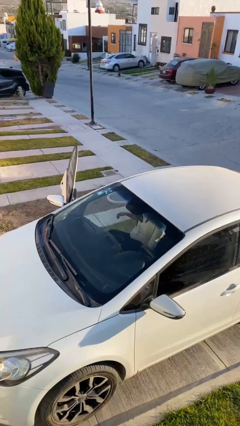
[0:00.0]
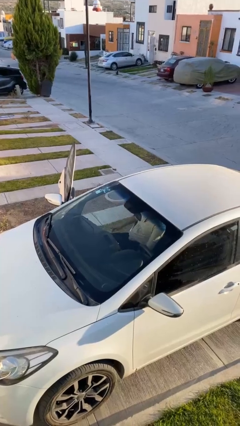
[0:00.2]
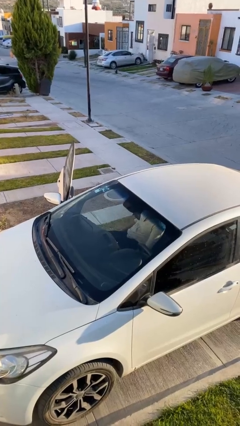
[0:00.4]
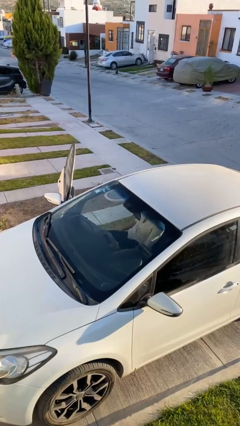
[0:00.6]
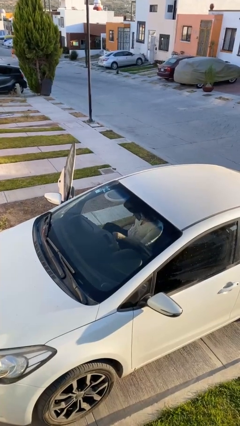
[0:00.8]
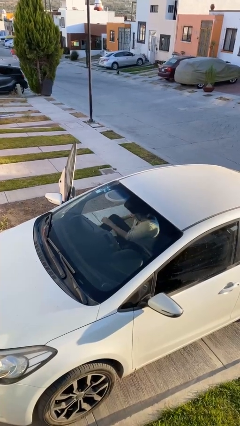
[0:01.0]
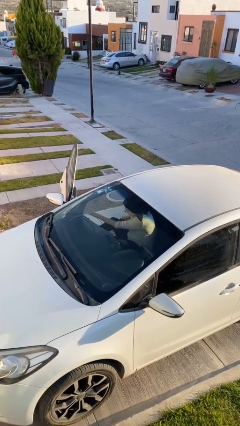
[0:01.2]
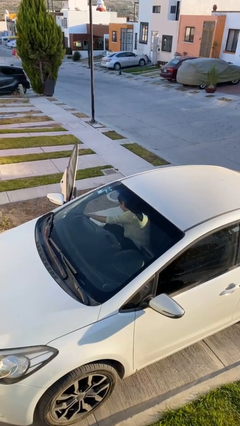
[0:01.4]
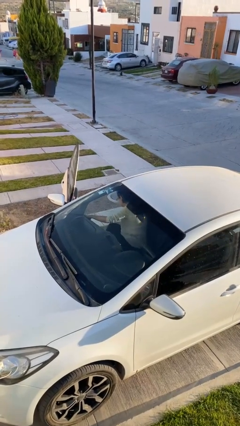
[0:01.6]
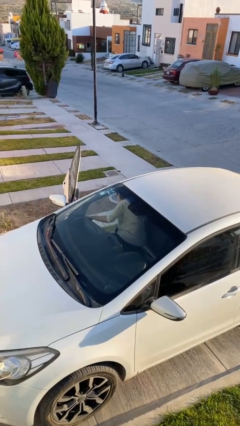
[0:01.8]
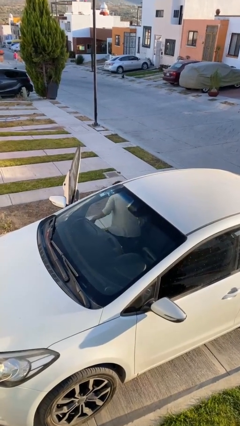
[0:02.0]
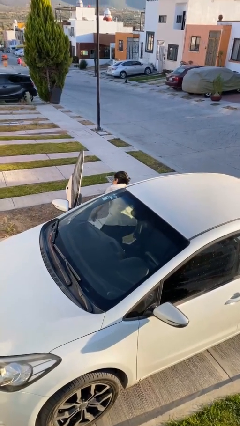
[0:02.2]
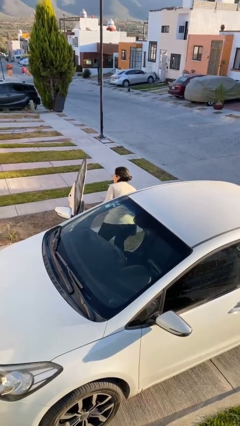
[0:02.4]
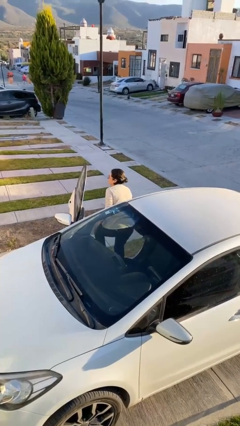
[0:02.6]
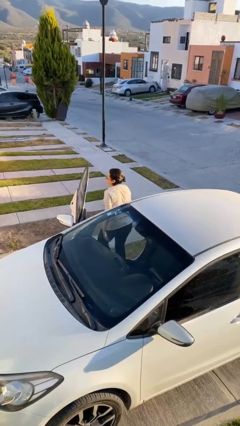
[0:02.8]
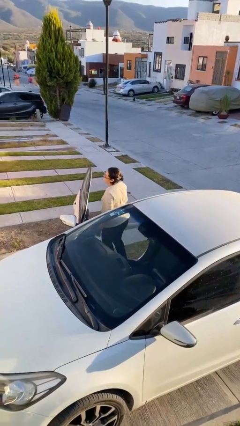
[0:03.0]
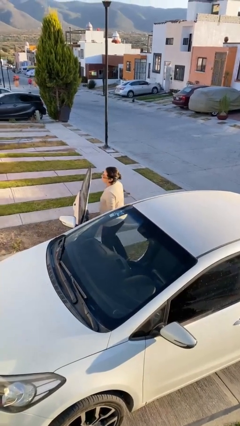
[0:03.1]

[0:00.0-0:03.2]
person exits car

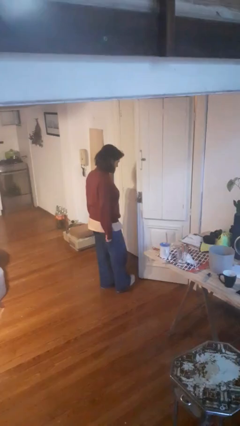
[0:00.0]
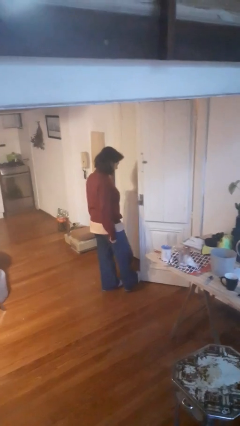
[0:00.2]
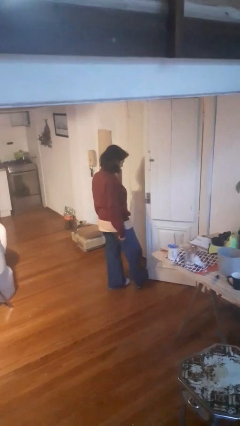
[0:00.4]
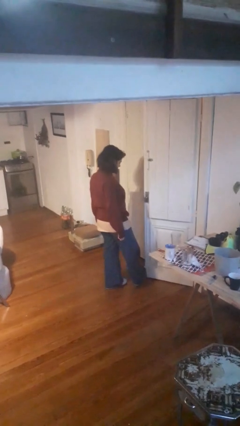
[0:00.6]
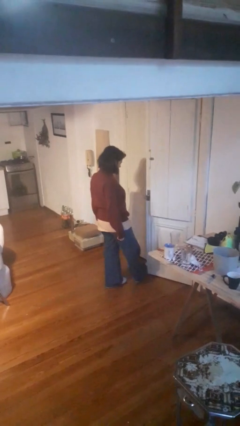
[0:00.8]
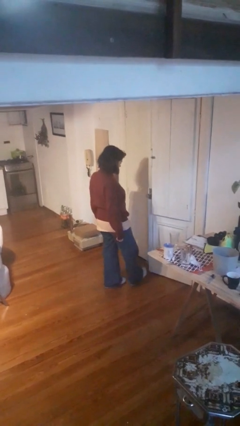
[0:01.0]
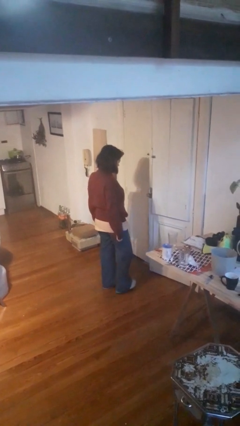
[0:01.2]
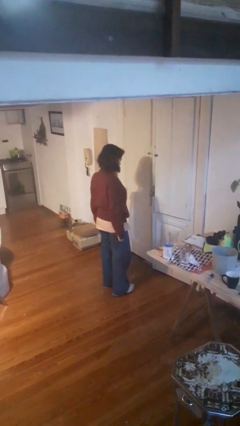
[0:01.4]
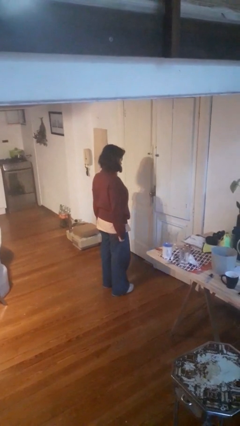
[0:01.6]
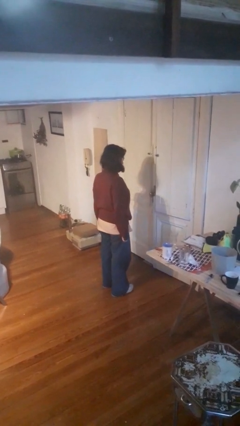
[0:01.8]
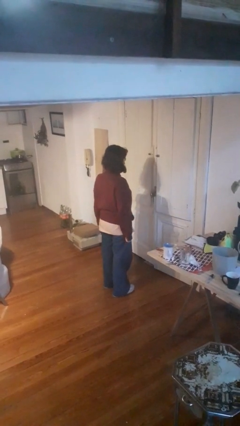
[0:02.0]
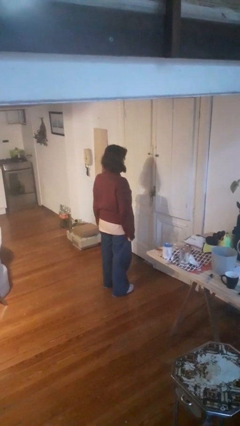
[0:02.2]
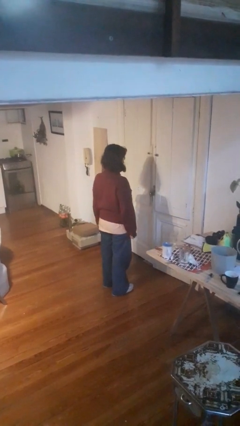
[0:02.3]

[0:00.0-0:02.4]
person closes door with foot

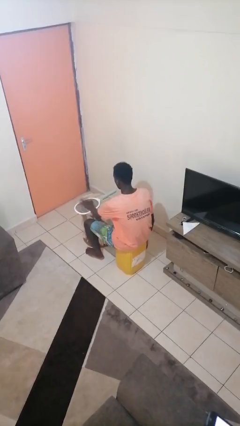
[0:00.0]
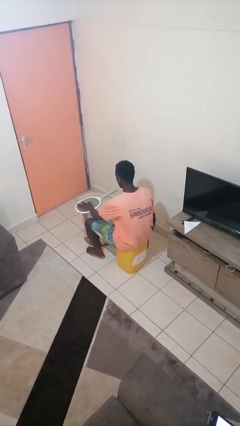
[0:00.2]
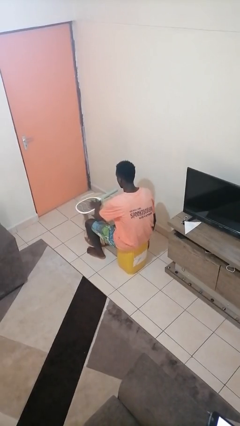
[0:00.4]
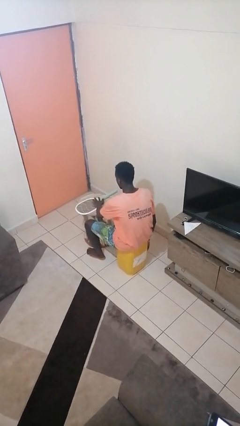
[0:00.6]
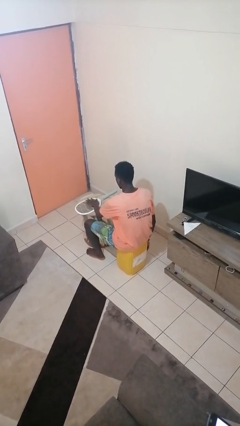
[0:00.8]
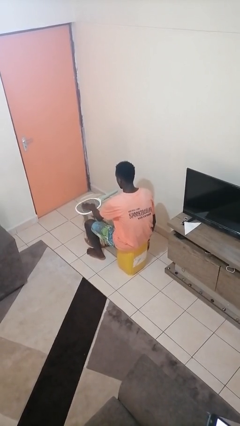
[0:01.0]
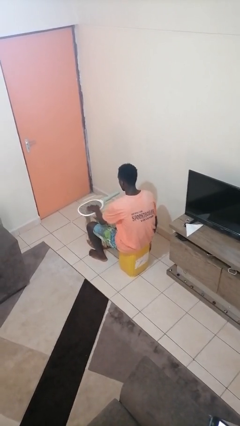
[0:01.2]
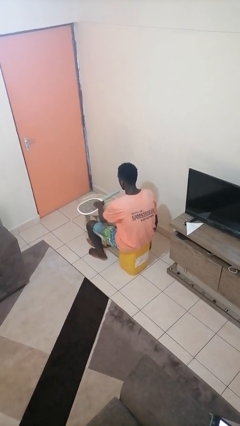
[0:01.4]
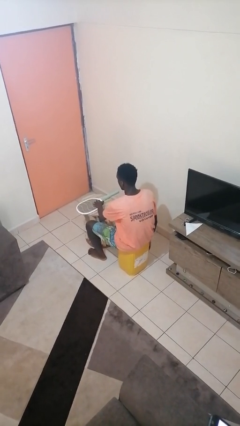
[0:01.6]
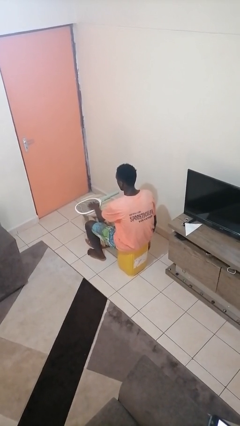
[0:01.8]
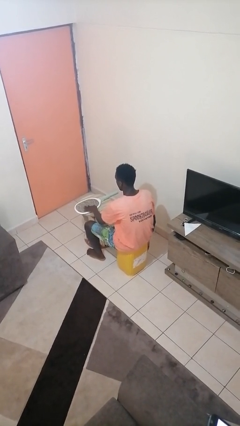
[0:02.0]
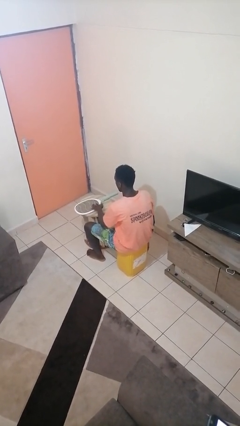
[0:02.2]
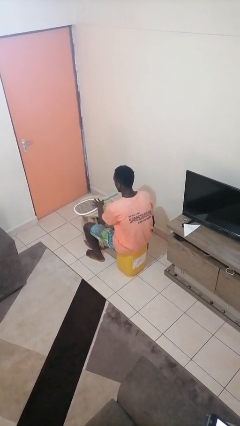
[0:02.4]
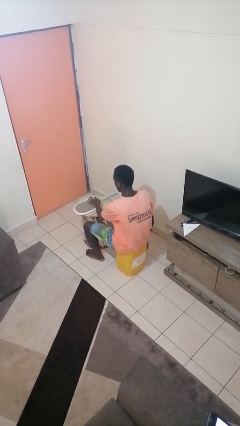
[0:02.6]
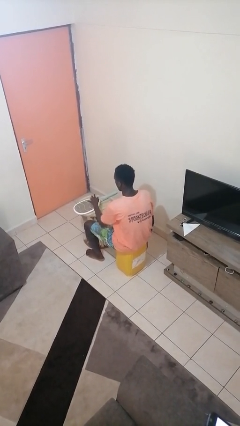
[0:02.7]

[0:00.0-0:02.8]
person waves hand over object

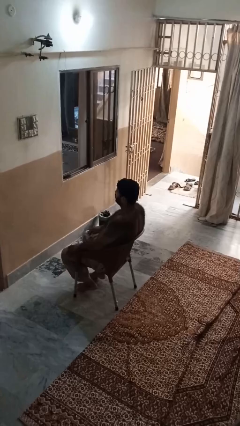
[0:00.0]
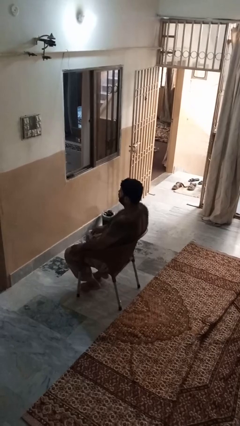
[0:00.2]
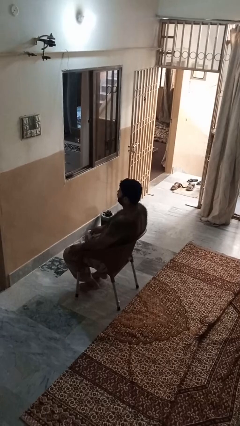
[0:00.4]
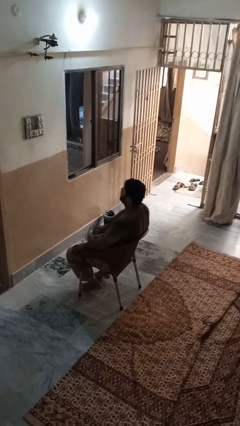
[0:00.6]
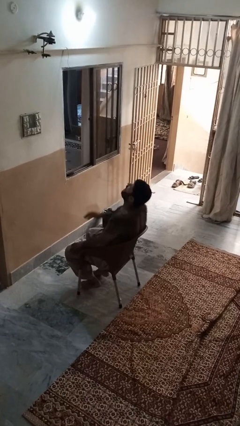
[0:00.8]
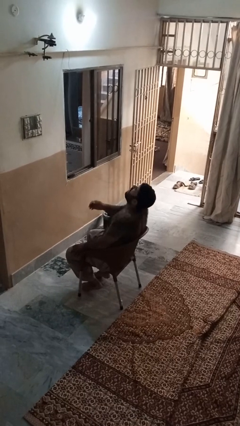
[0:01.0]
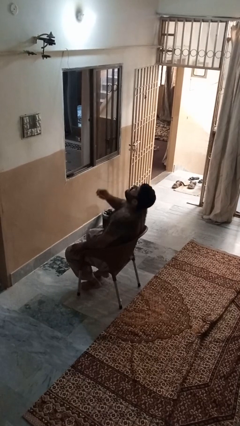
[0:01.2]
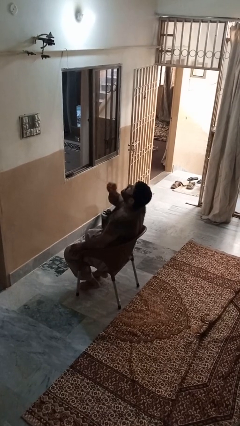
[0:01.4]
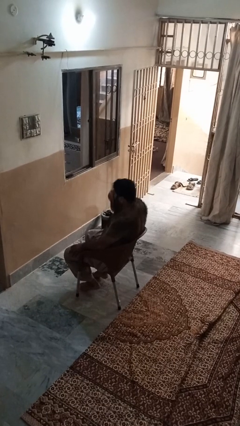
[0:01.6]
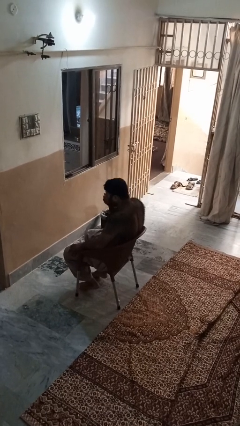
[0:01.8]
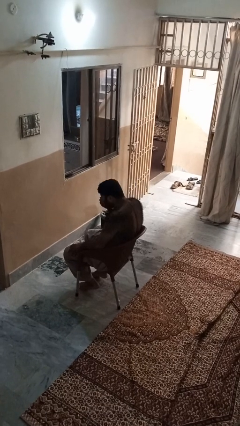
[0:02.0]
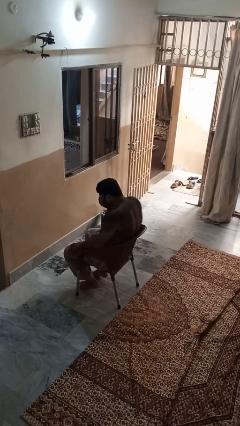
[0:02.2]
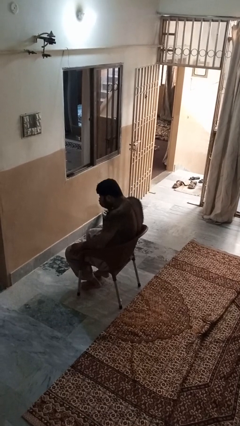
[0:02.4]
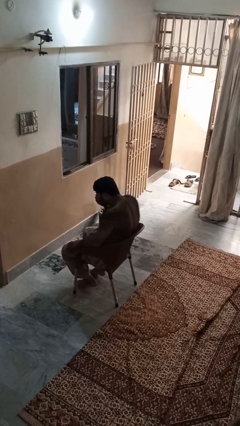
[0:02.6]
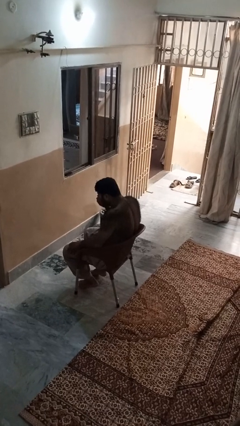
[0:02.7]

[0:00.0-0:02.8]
person sneezes into hand

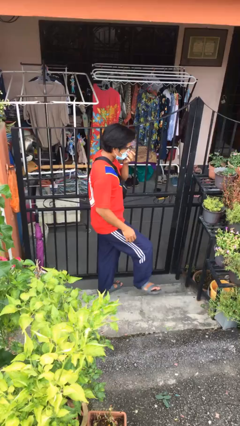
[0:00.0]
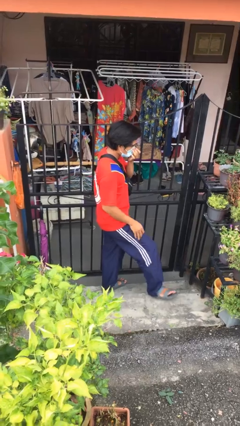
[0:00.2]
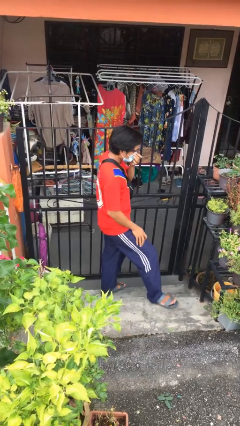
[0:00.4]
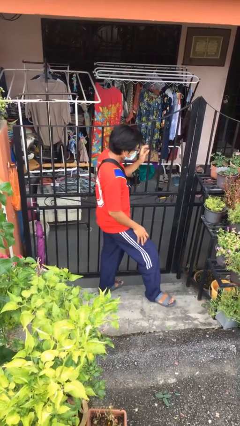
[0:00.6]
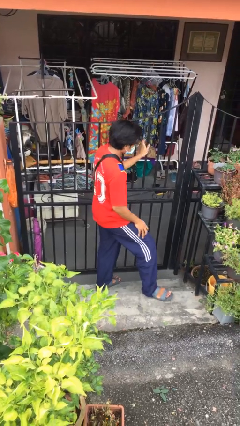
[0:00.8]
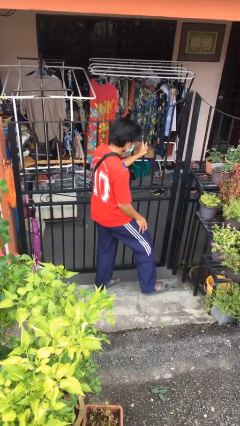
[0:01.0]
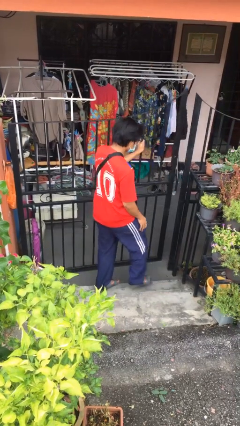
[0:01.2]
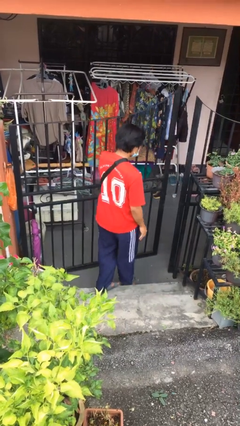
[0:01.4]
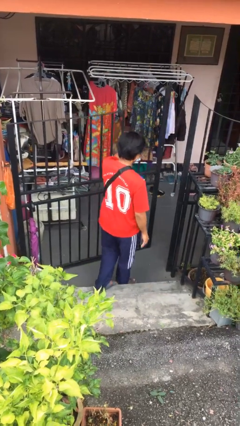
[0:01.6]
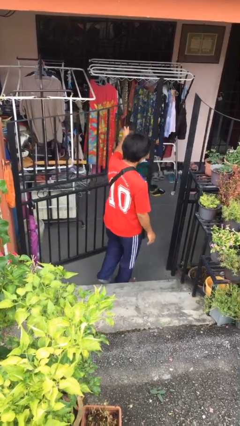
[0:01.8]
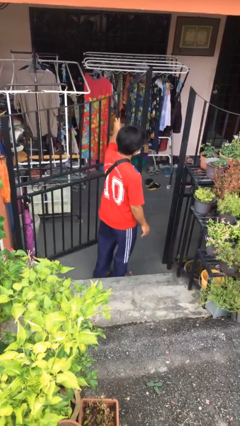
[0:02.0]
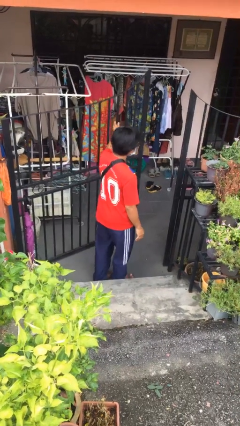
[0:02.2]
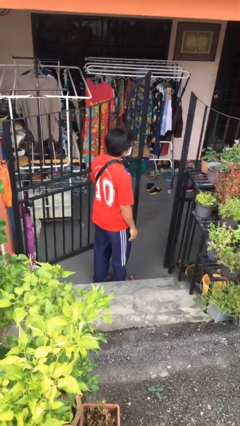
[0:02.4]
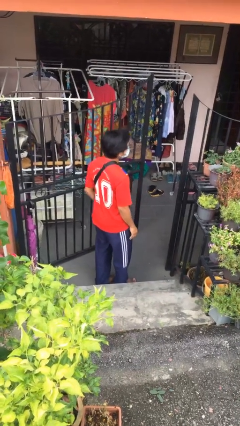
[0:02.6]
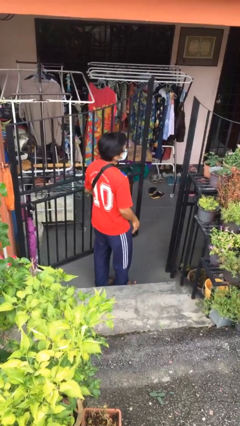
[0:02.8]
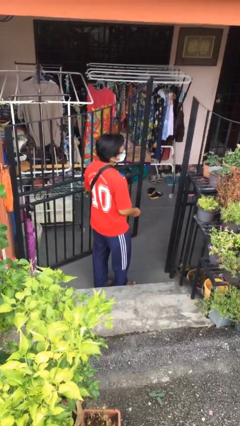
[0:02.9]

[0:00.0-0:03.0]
person opens facility door

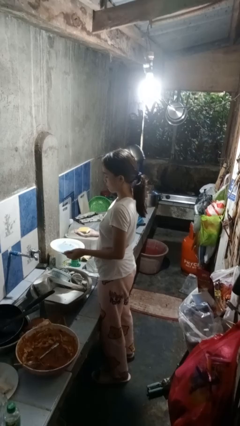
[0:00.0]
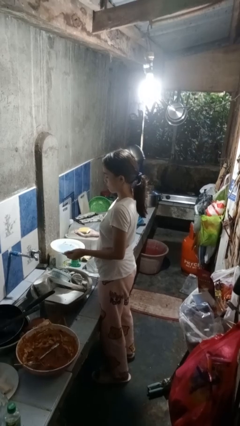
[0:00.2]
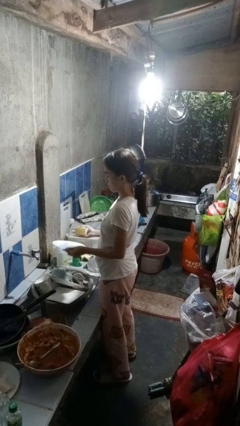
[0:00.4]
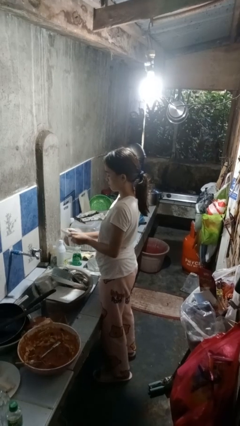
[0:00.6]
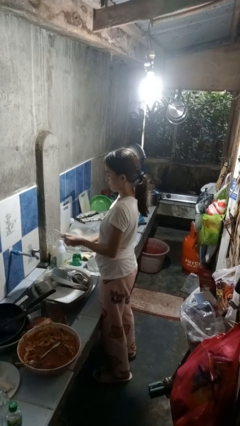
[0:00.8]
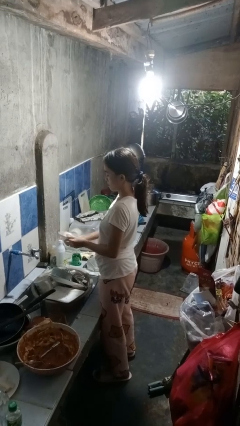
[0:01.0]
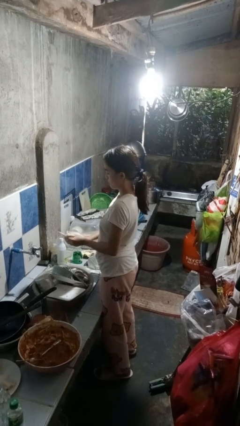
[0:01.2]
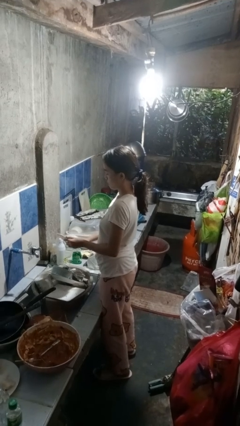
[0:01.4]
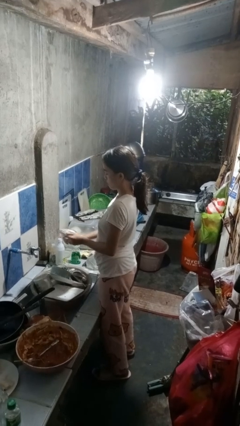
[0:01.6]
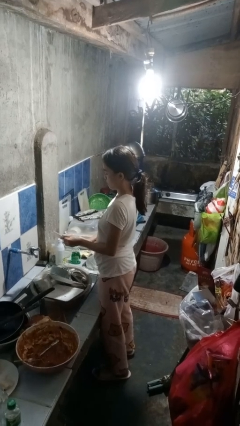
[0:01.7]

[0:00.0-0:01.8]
person washes dish

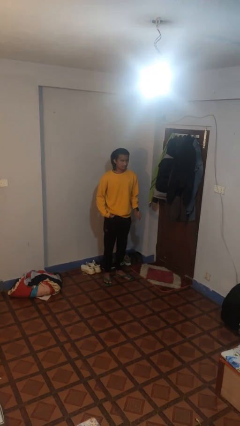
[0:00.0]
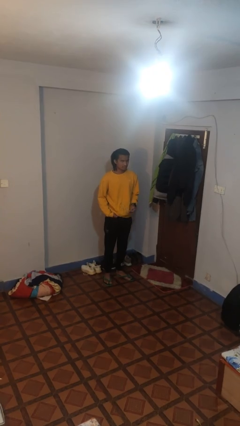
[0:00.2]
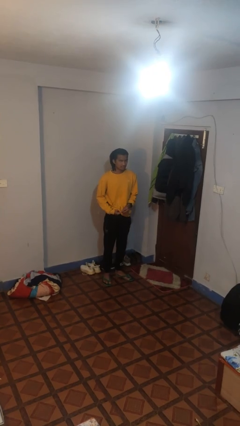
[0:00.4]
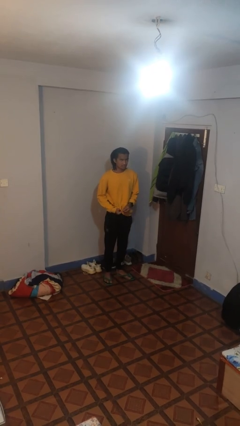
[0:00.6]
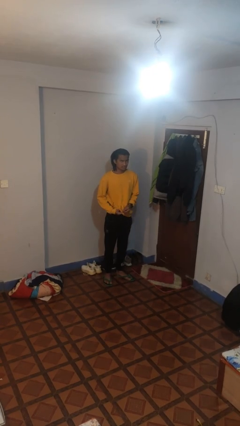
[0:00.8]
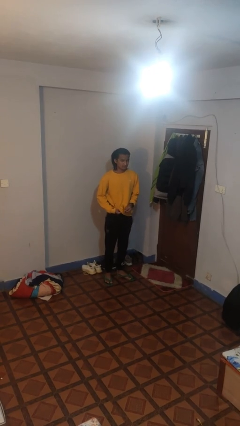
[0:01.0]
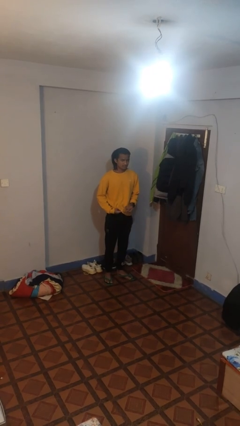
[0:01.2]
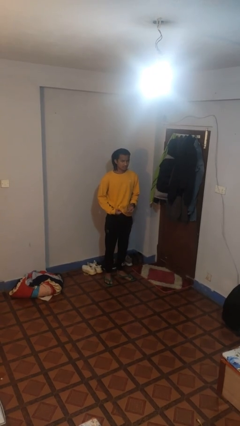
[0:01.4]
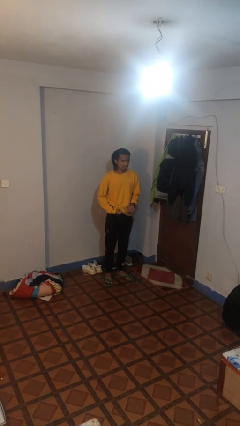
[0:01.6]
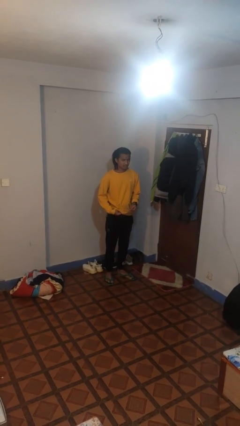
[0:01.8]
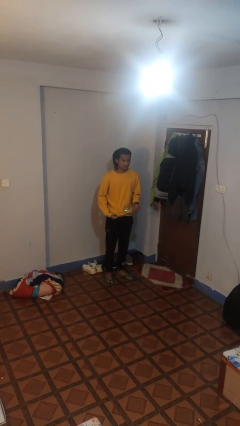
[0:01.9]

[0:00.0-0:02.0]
person cleans eyeglasses
